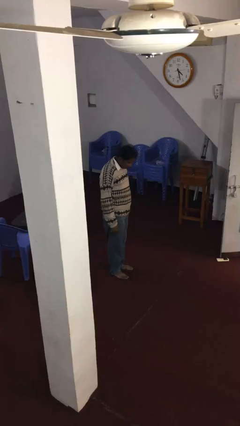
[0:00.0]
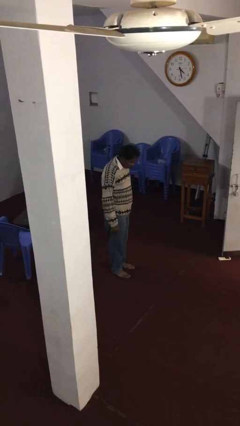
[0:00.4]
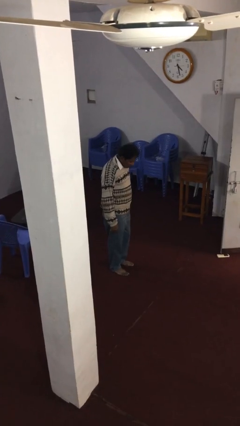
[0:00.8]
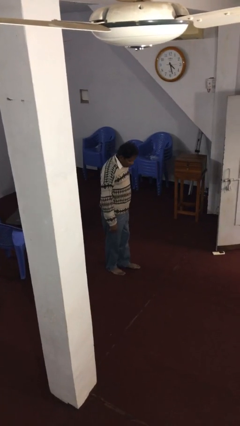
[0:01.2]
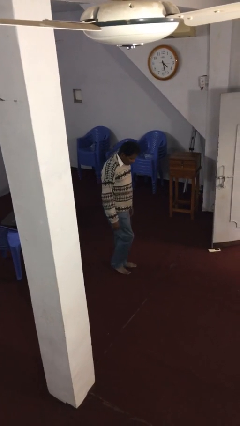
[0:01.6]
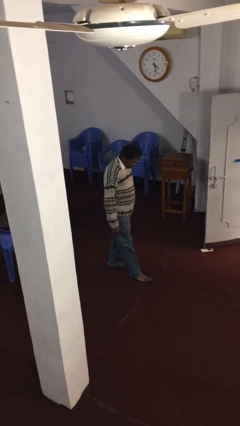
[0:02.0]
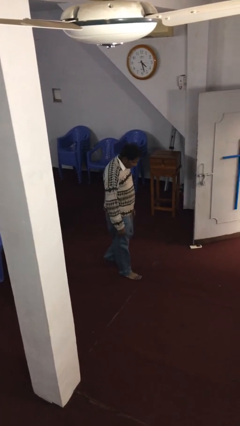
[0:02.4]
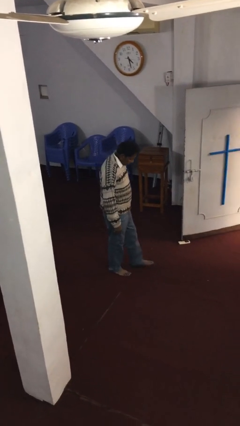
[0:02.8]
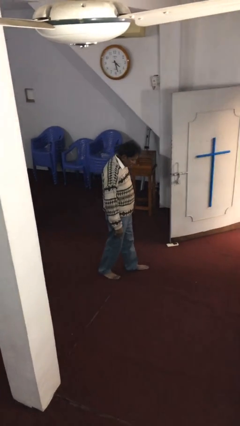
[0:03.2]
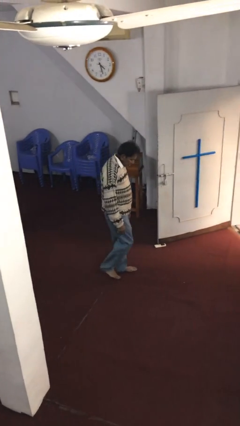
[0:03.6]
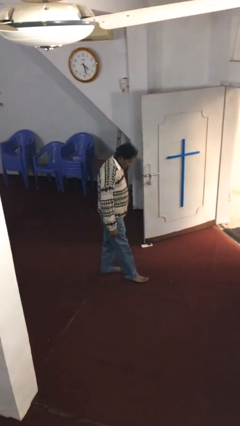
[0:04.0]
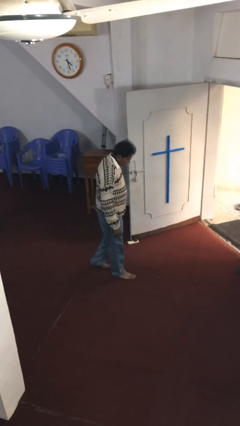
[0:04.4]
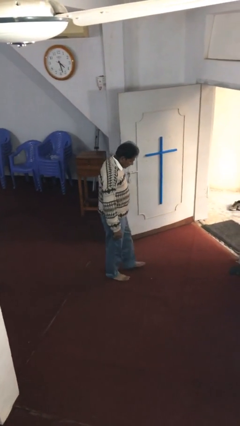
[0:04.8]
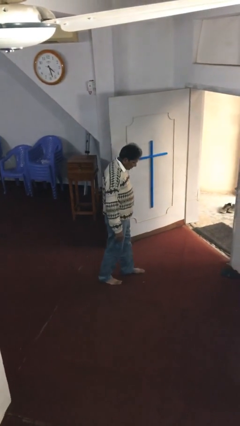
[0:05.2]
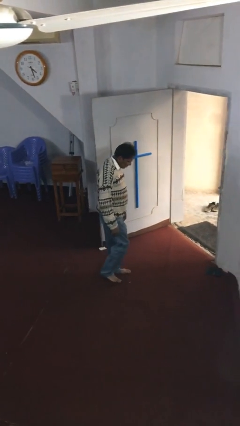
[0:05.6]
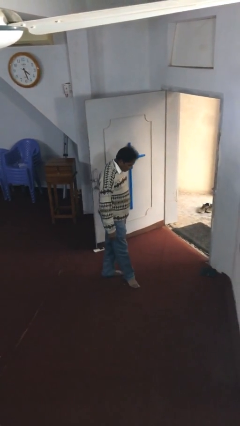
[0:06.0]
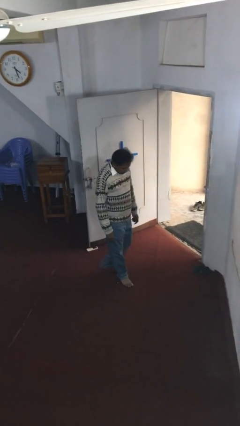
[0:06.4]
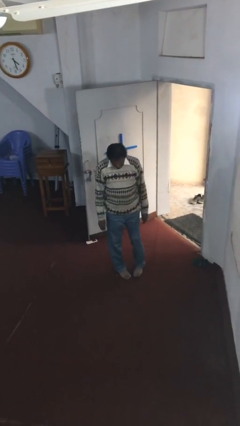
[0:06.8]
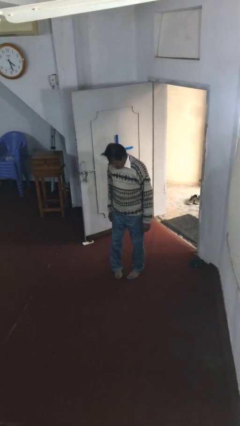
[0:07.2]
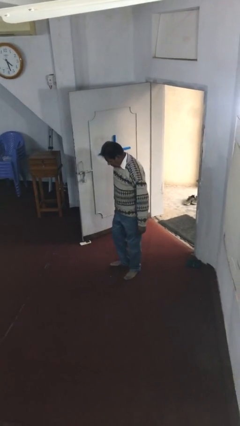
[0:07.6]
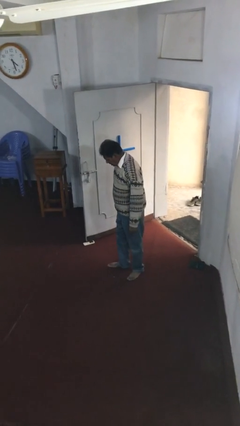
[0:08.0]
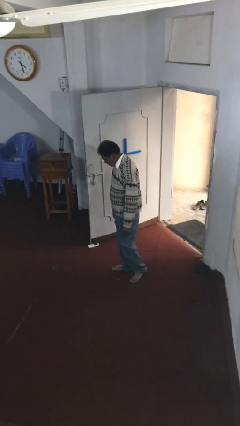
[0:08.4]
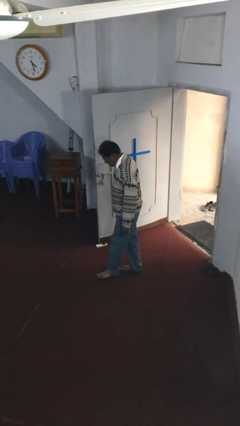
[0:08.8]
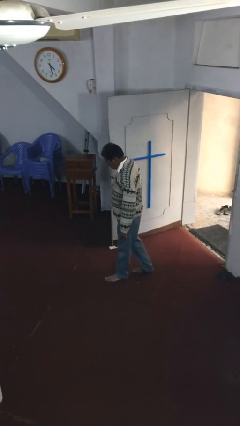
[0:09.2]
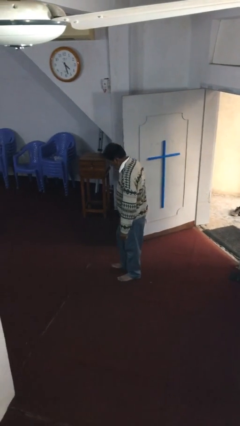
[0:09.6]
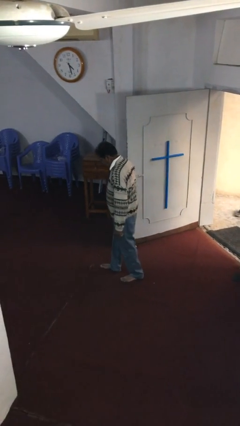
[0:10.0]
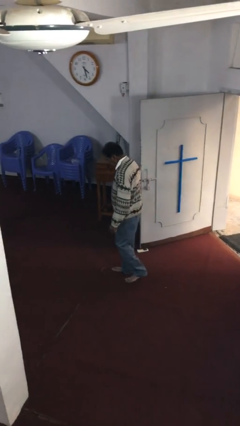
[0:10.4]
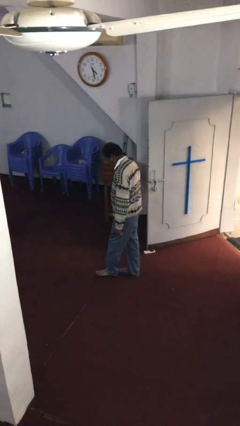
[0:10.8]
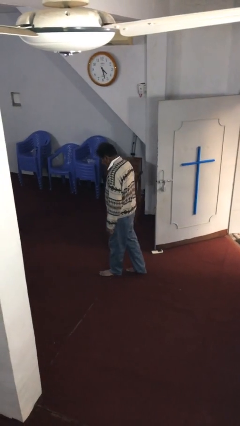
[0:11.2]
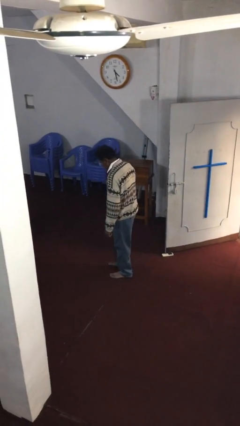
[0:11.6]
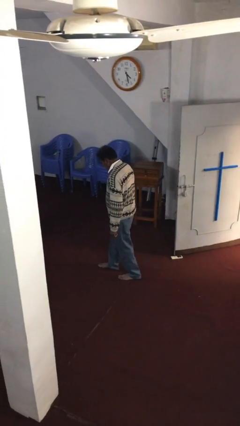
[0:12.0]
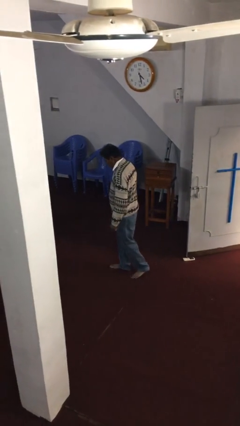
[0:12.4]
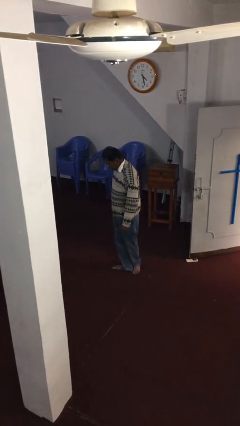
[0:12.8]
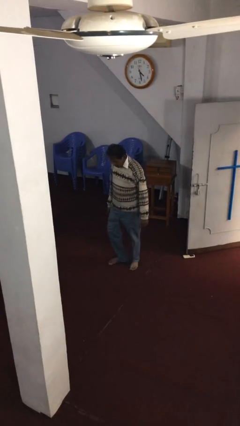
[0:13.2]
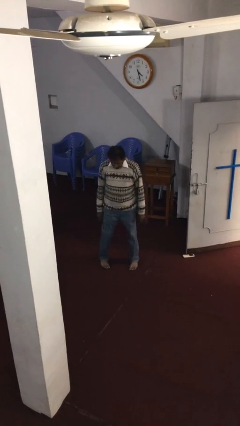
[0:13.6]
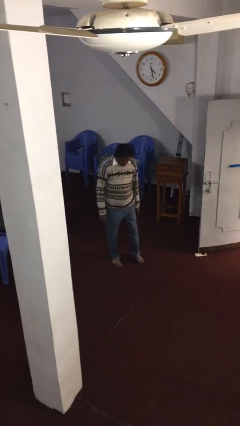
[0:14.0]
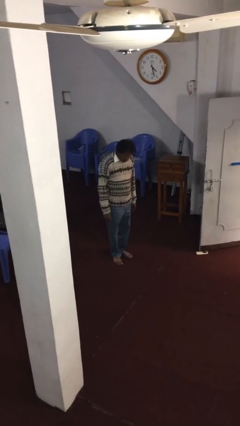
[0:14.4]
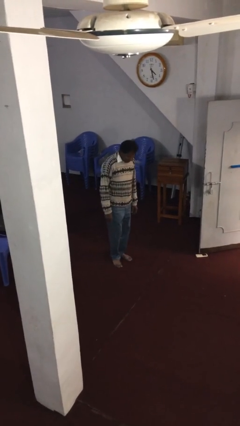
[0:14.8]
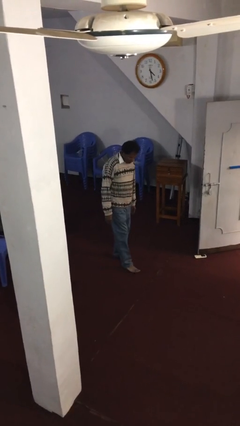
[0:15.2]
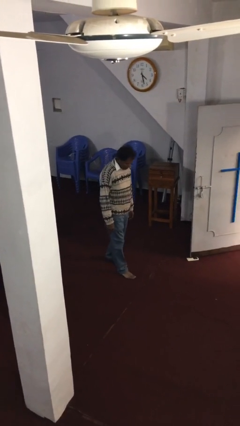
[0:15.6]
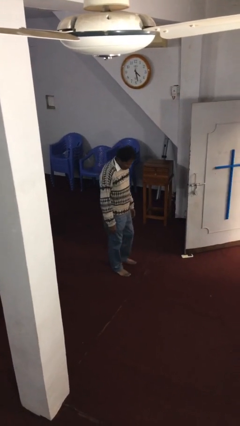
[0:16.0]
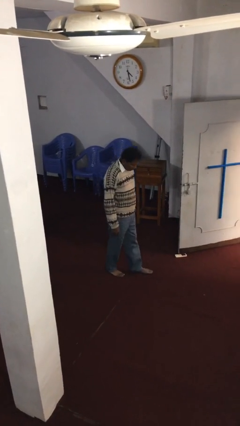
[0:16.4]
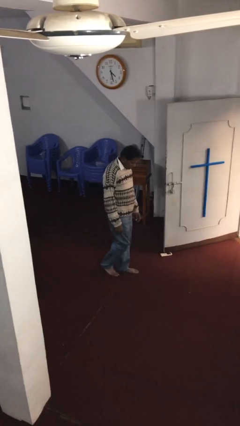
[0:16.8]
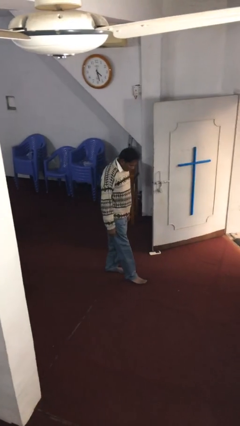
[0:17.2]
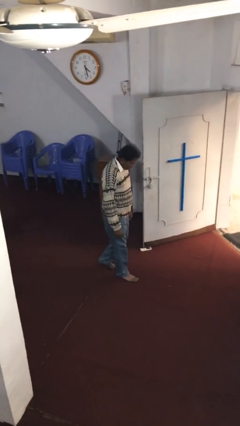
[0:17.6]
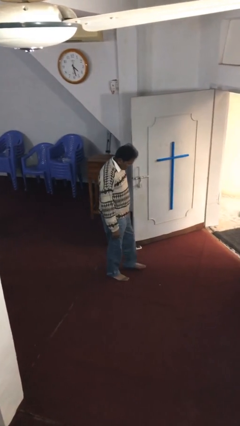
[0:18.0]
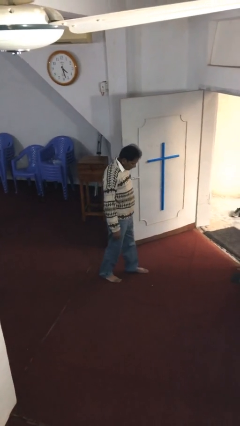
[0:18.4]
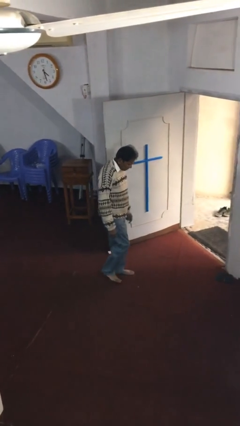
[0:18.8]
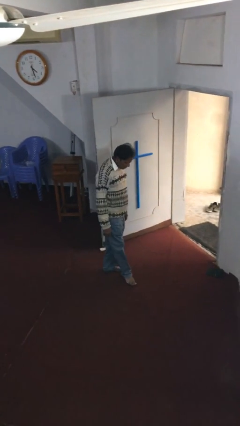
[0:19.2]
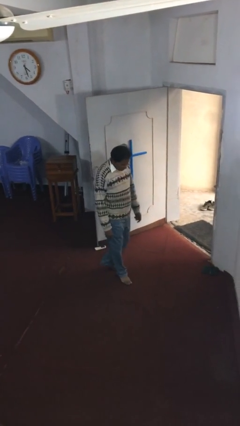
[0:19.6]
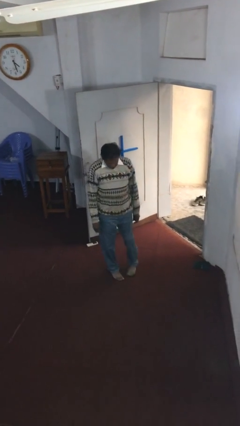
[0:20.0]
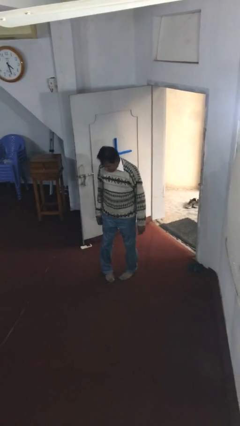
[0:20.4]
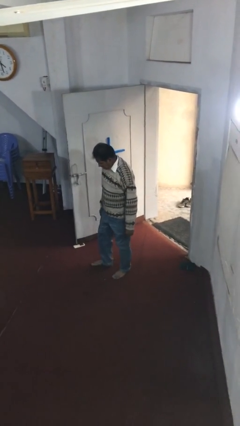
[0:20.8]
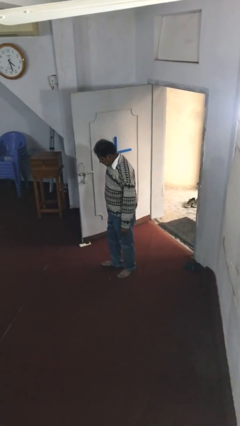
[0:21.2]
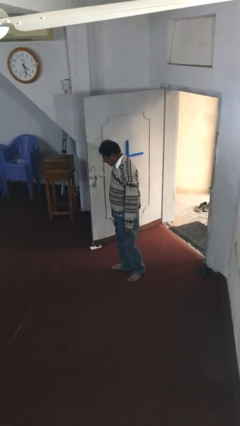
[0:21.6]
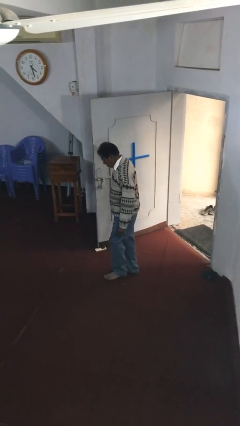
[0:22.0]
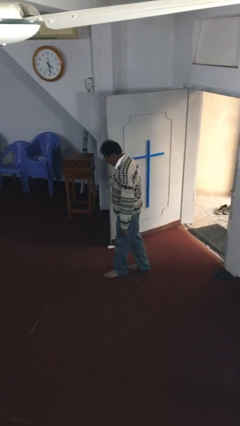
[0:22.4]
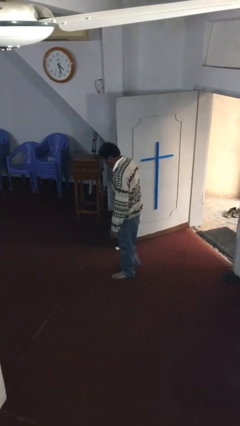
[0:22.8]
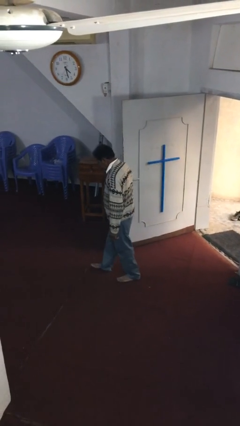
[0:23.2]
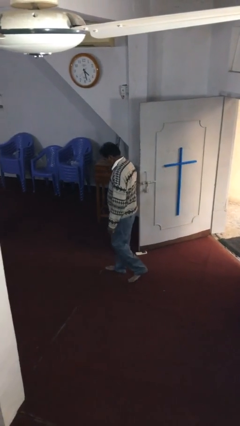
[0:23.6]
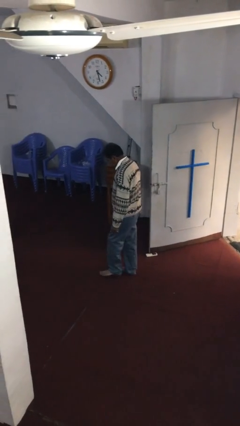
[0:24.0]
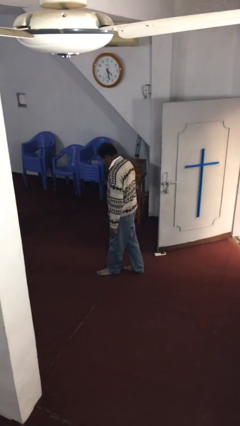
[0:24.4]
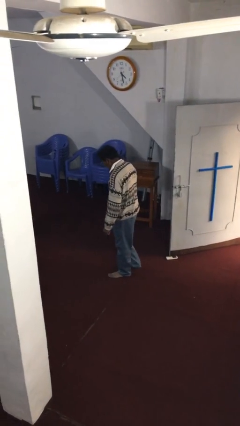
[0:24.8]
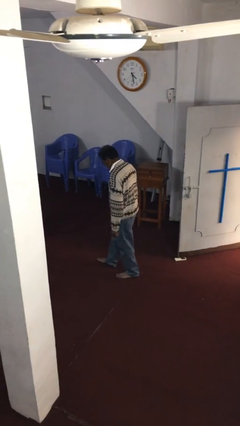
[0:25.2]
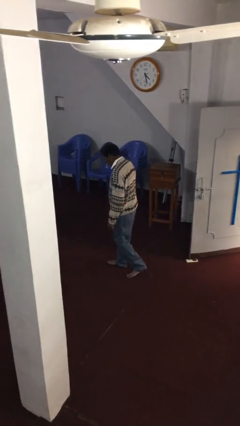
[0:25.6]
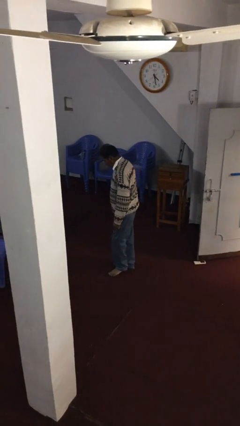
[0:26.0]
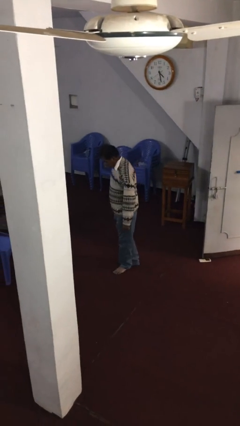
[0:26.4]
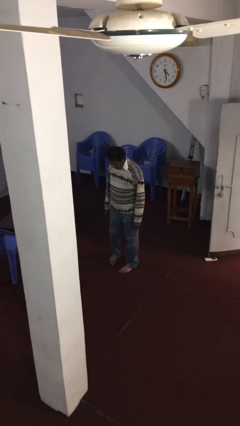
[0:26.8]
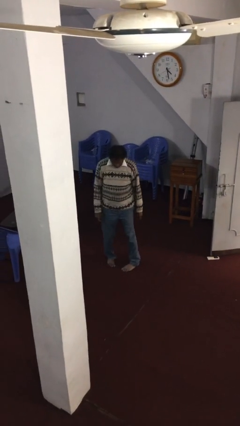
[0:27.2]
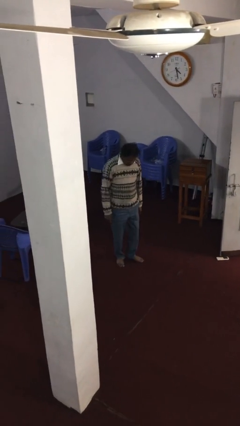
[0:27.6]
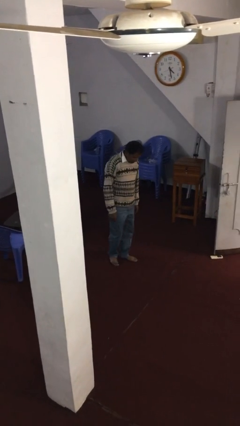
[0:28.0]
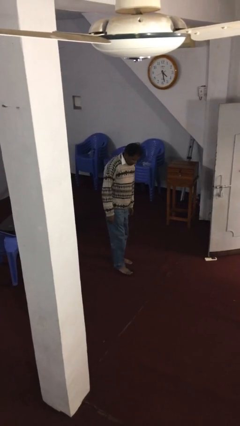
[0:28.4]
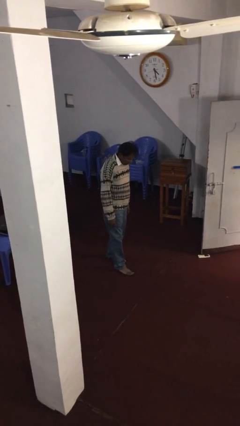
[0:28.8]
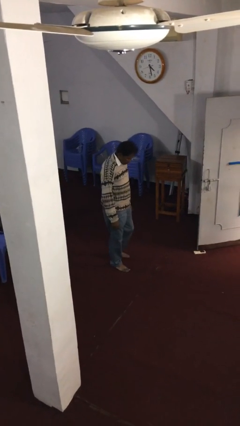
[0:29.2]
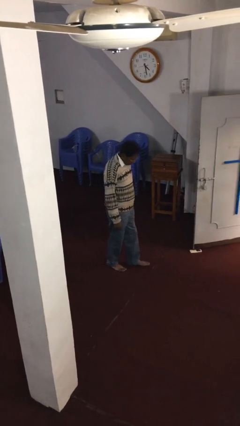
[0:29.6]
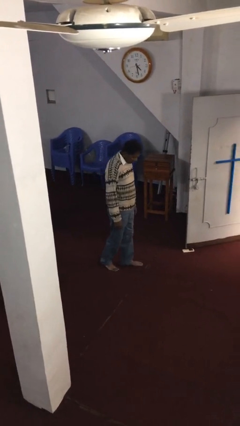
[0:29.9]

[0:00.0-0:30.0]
person walks

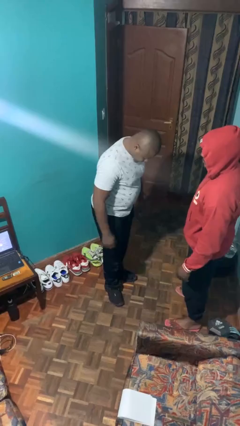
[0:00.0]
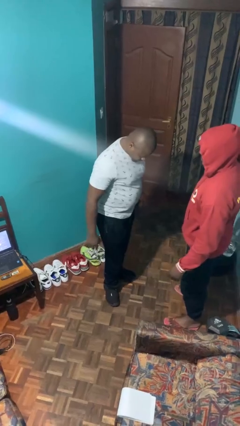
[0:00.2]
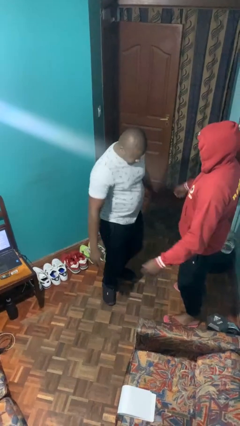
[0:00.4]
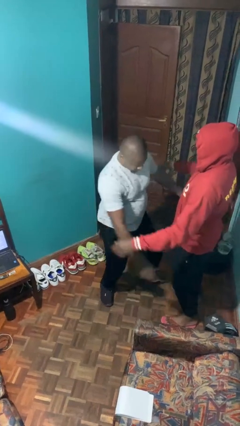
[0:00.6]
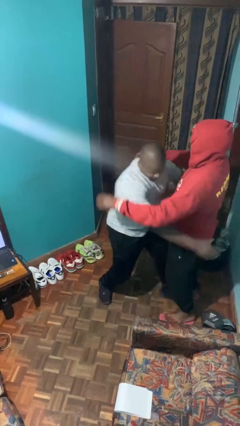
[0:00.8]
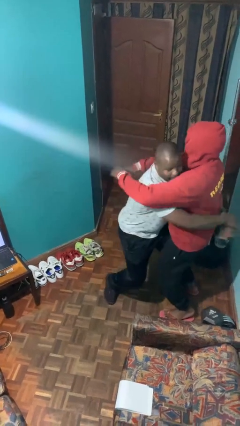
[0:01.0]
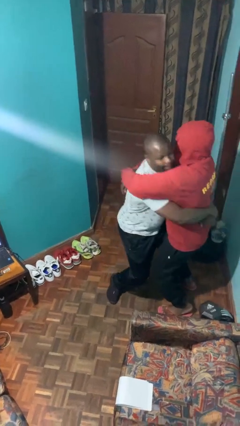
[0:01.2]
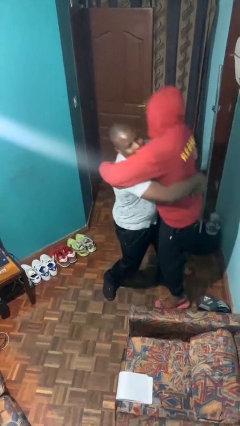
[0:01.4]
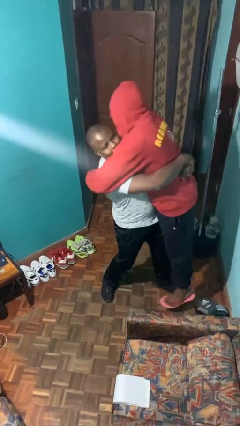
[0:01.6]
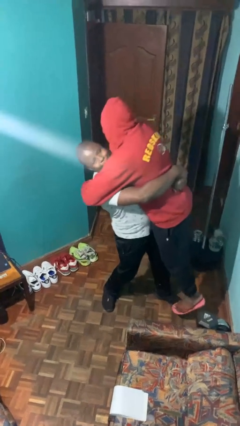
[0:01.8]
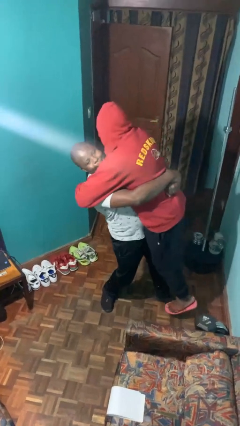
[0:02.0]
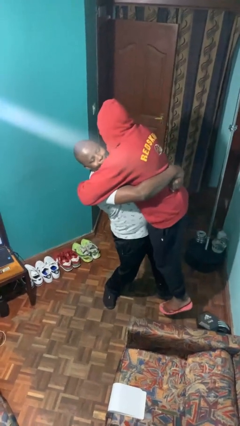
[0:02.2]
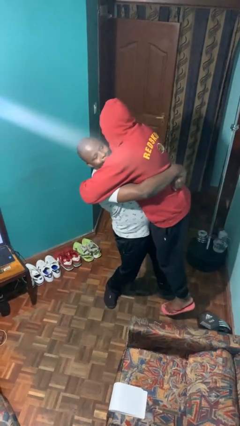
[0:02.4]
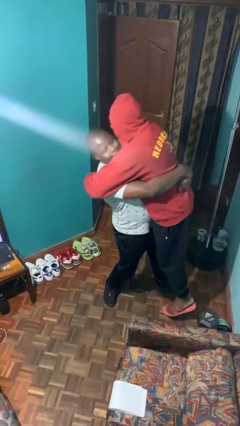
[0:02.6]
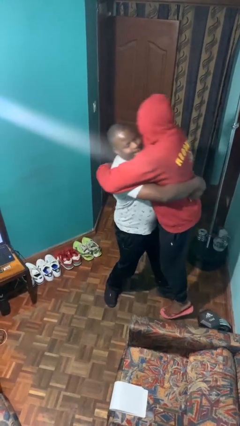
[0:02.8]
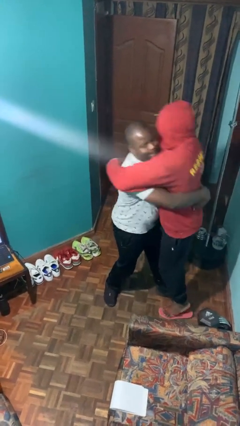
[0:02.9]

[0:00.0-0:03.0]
person picks up person
